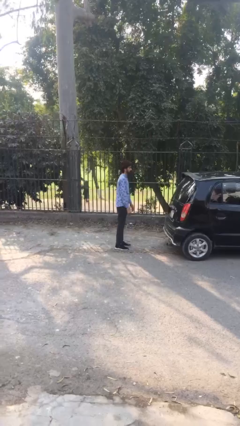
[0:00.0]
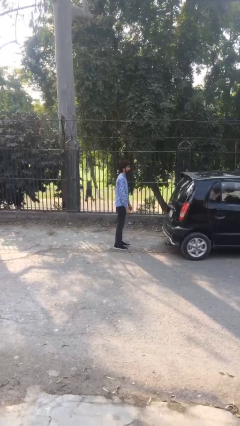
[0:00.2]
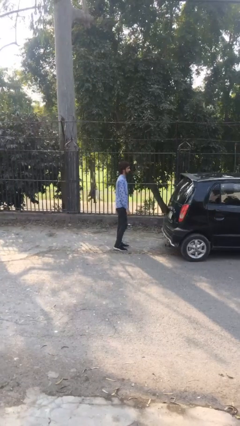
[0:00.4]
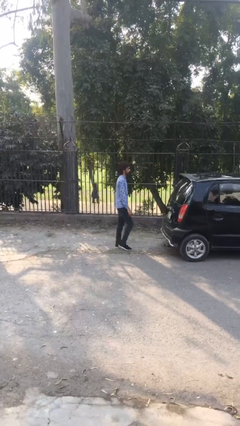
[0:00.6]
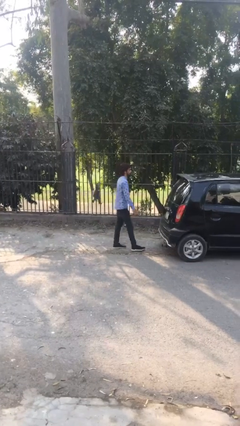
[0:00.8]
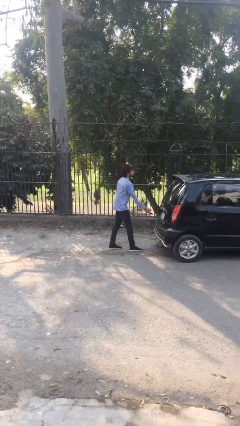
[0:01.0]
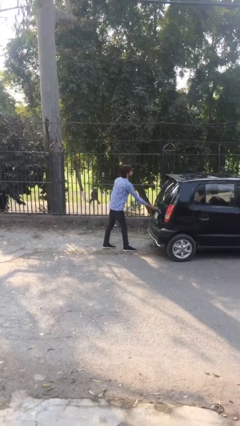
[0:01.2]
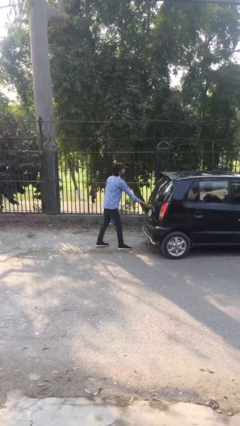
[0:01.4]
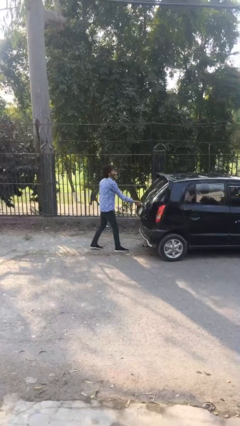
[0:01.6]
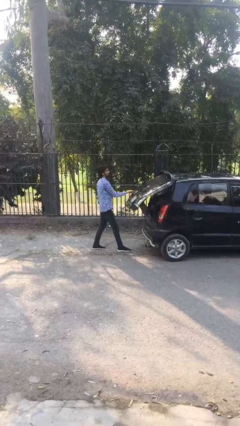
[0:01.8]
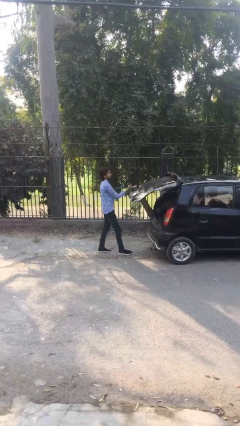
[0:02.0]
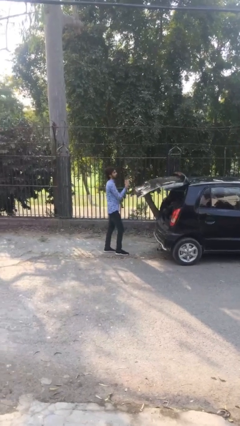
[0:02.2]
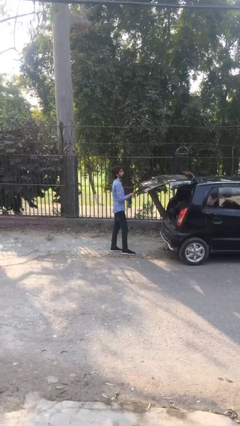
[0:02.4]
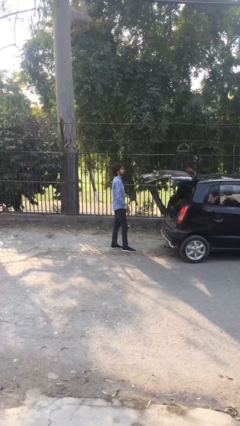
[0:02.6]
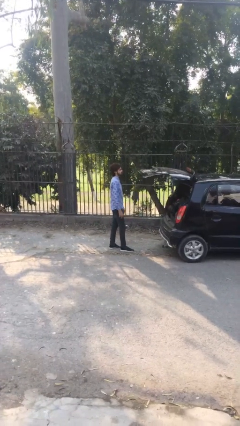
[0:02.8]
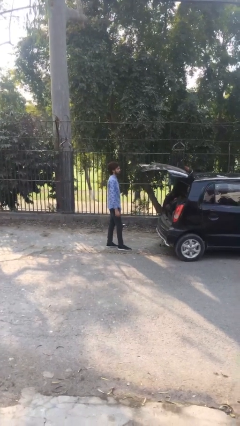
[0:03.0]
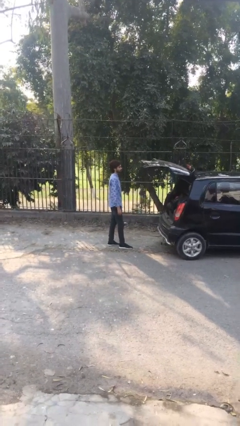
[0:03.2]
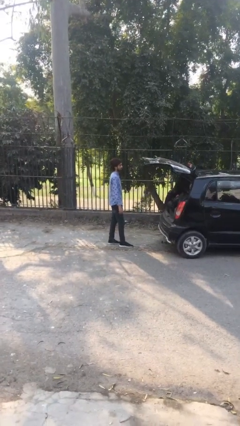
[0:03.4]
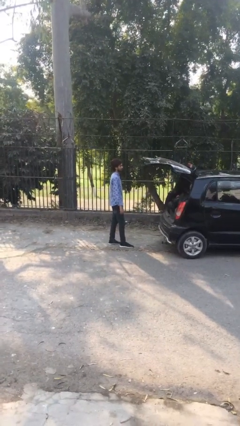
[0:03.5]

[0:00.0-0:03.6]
person opens car trunk

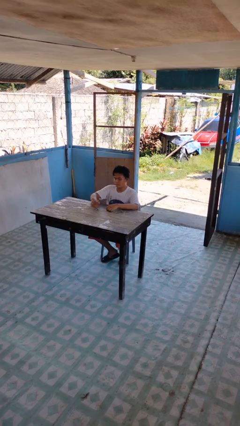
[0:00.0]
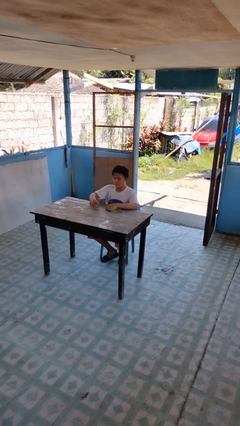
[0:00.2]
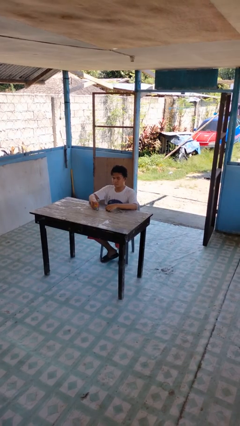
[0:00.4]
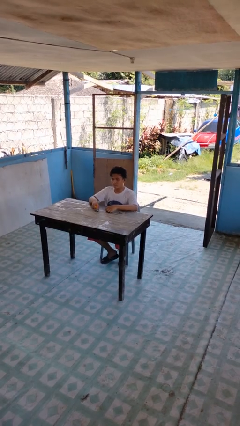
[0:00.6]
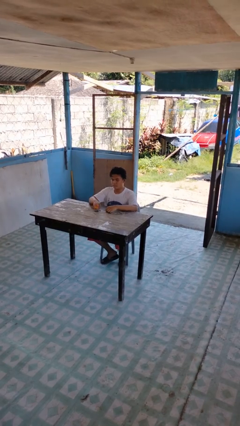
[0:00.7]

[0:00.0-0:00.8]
person sets upright glass

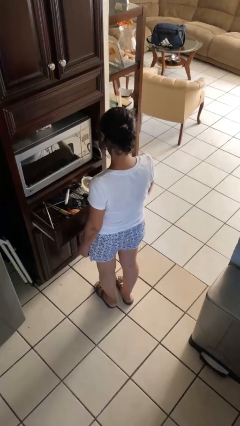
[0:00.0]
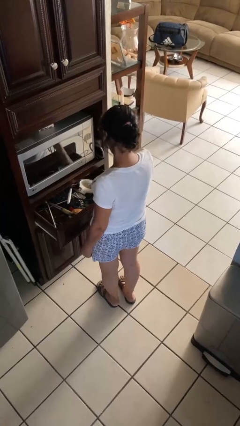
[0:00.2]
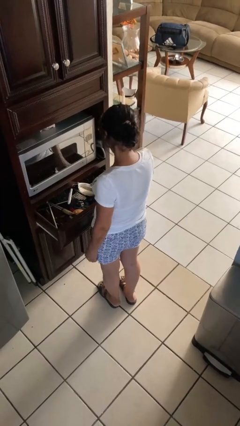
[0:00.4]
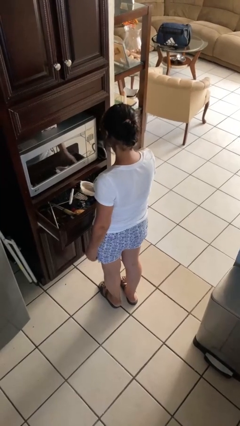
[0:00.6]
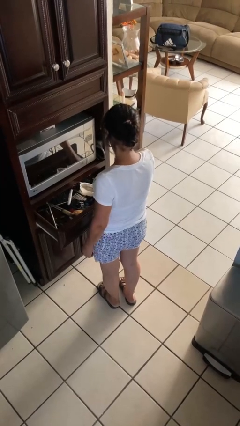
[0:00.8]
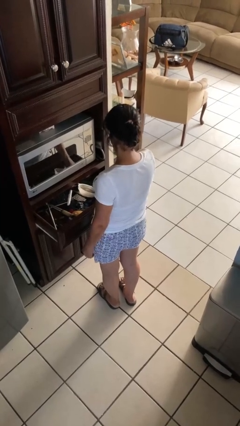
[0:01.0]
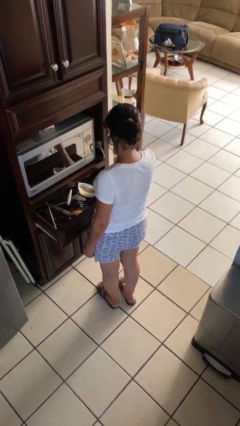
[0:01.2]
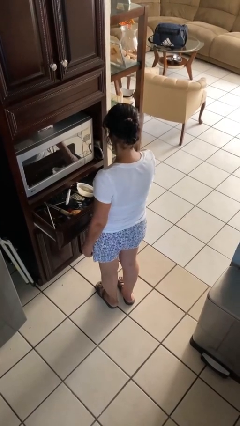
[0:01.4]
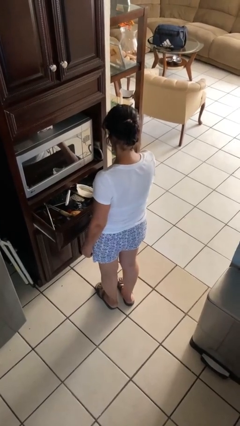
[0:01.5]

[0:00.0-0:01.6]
person searches in kitchen drawer

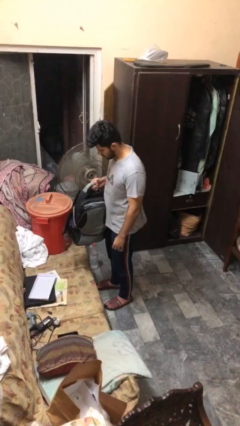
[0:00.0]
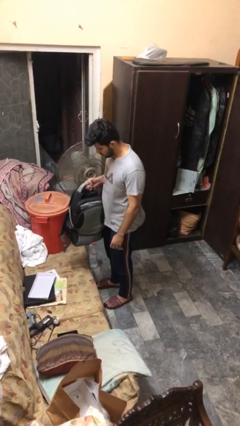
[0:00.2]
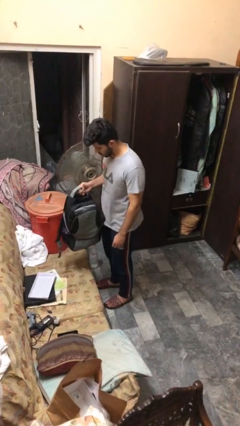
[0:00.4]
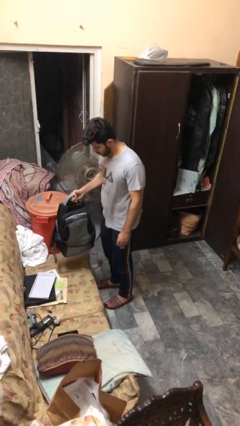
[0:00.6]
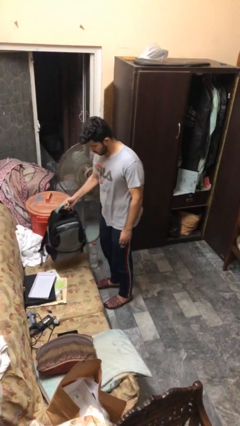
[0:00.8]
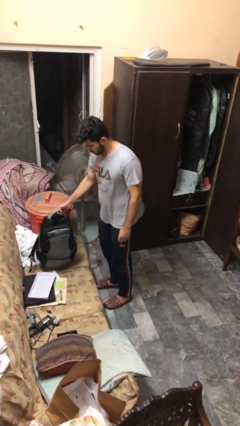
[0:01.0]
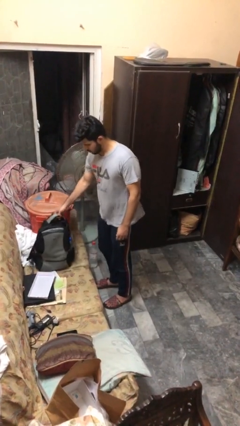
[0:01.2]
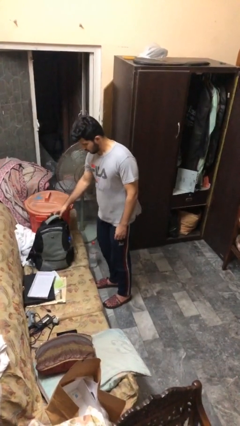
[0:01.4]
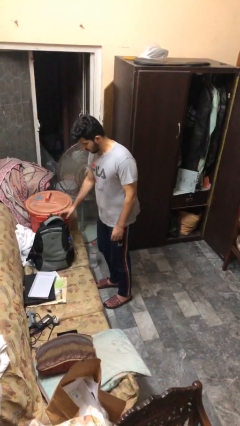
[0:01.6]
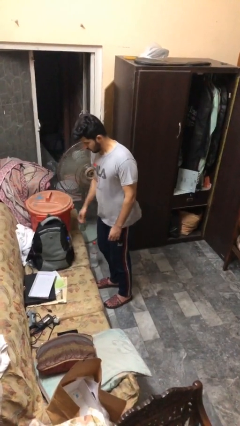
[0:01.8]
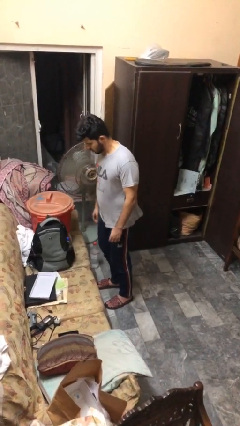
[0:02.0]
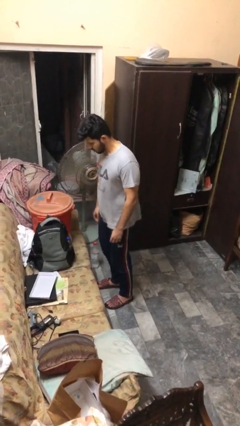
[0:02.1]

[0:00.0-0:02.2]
person puts down object on couch

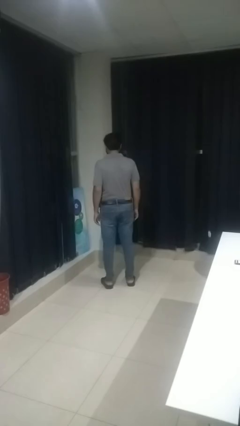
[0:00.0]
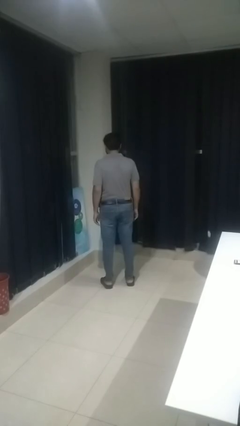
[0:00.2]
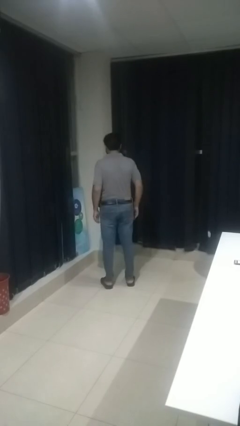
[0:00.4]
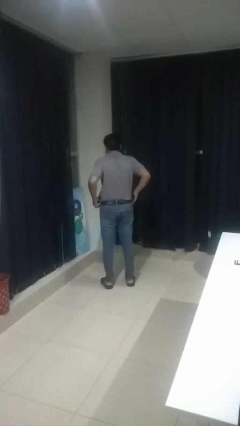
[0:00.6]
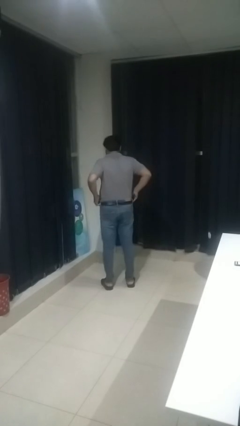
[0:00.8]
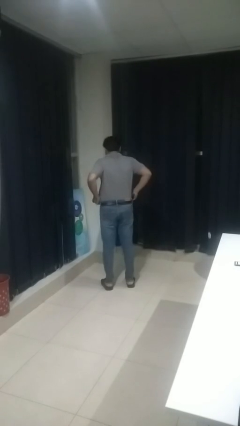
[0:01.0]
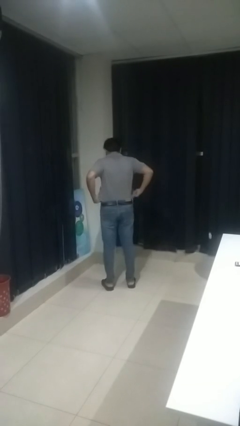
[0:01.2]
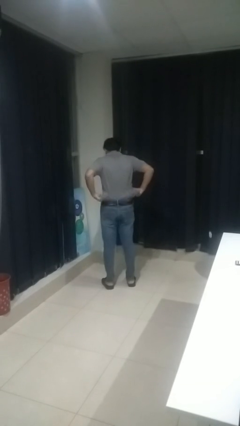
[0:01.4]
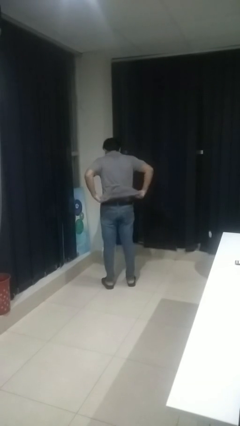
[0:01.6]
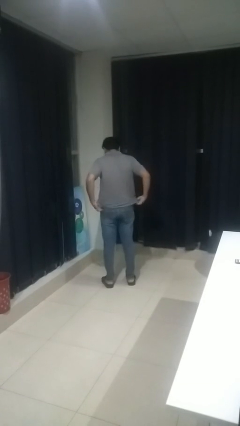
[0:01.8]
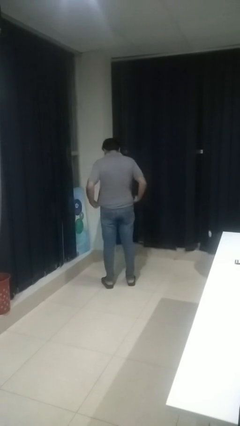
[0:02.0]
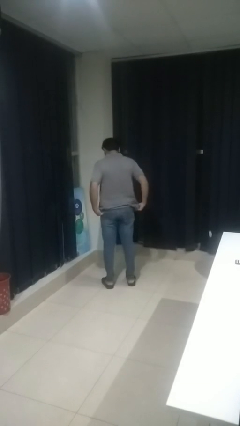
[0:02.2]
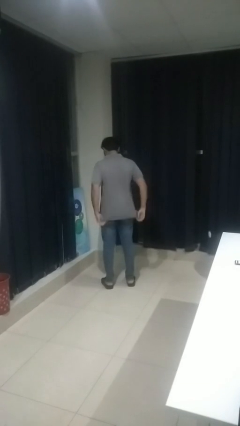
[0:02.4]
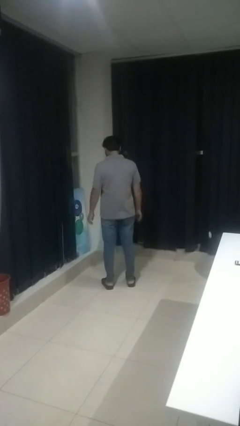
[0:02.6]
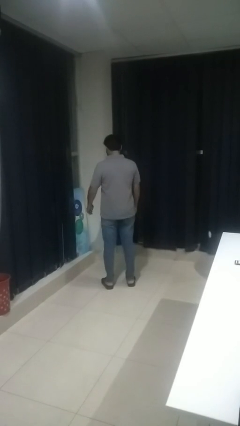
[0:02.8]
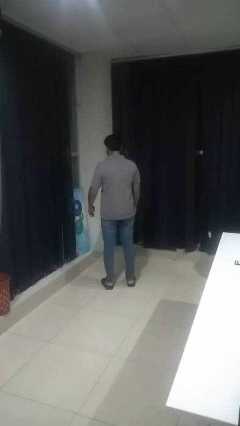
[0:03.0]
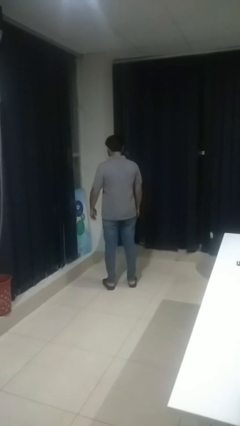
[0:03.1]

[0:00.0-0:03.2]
person untucks shirt

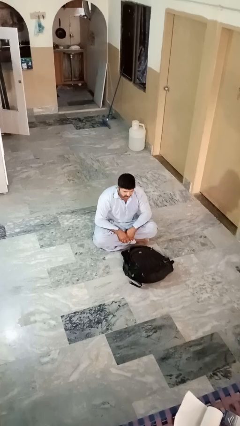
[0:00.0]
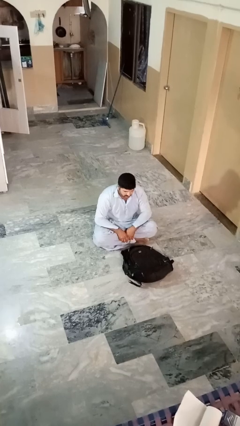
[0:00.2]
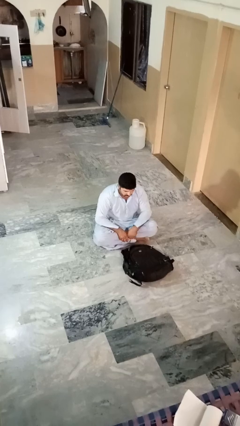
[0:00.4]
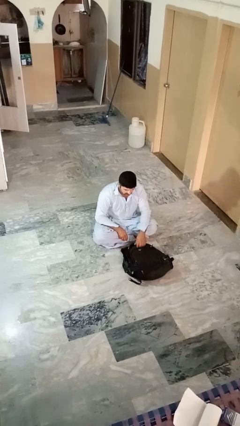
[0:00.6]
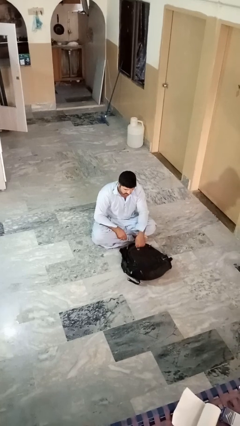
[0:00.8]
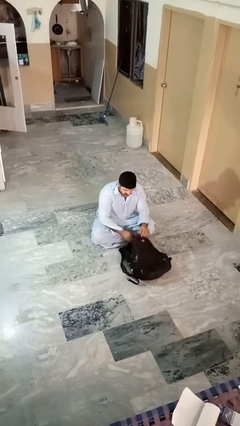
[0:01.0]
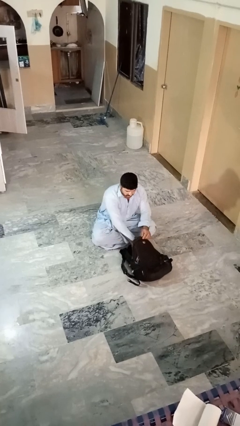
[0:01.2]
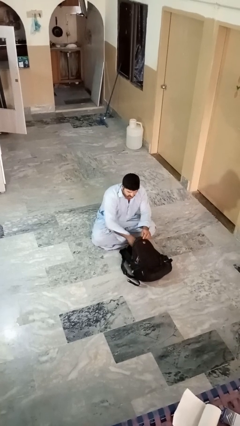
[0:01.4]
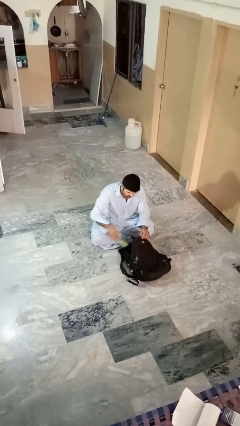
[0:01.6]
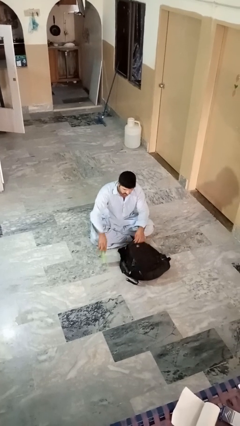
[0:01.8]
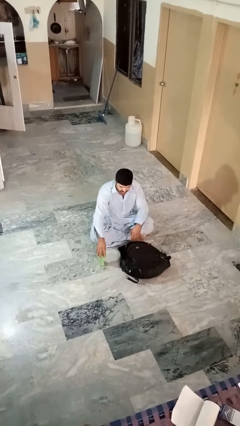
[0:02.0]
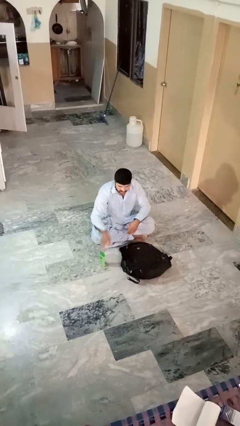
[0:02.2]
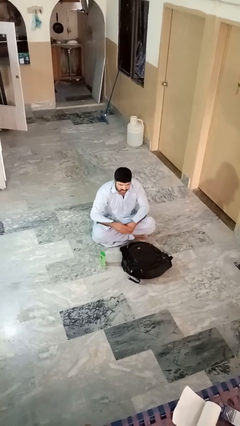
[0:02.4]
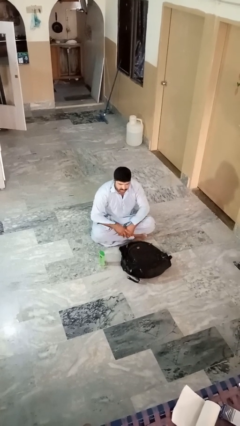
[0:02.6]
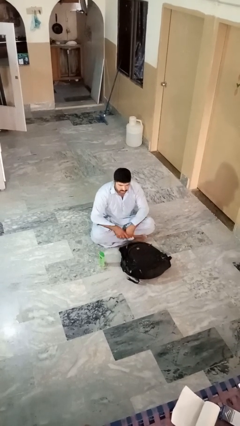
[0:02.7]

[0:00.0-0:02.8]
person takes object from bag

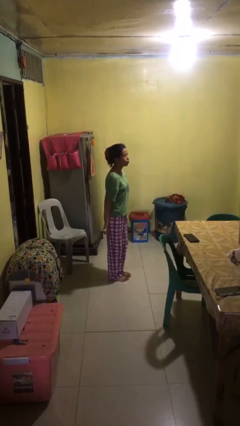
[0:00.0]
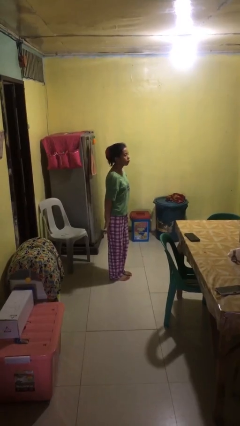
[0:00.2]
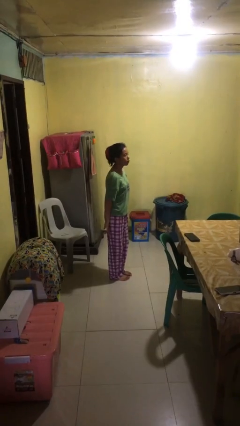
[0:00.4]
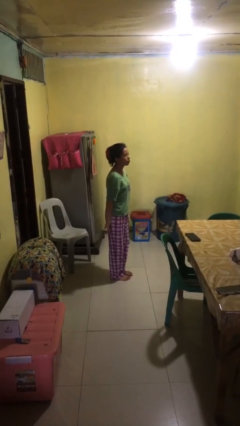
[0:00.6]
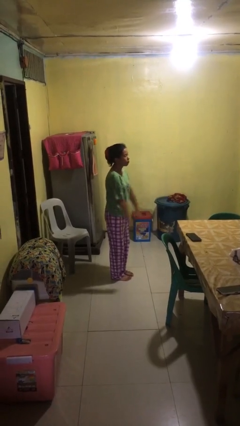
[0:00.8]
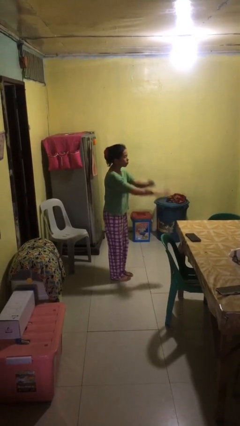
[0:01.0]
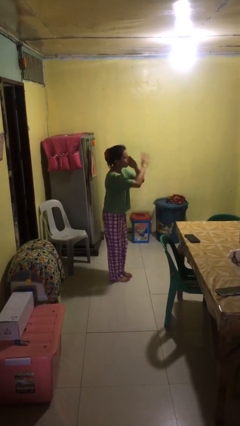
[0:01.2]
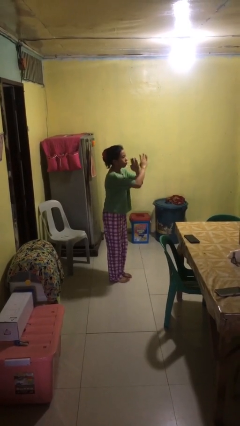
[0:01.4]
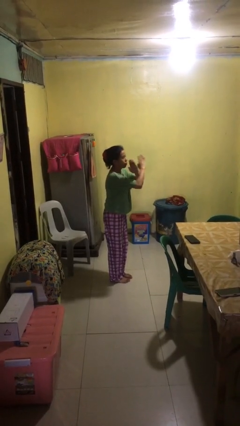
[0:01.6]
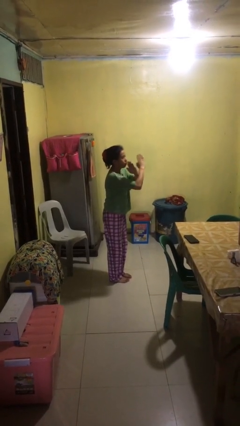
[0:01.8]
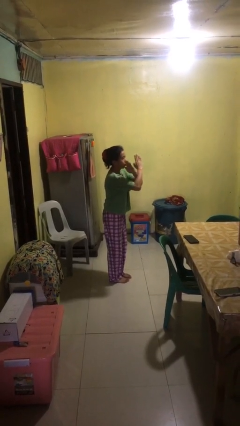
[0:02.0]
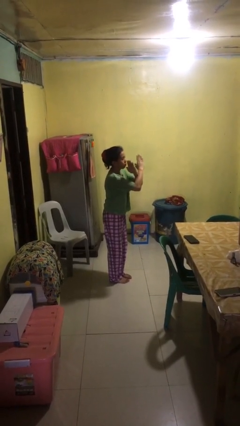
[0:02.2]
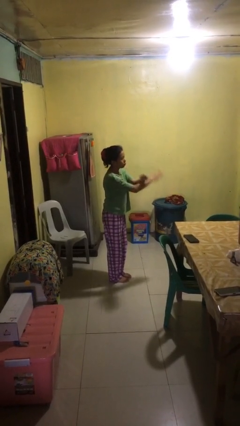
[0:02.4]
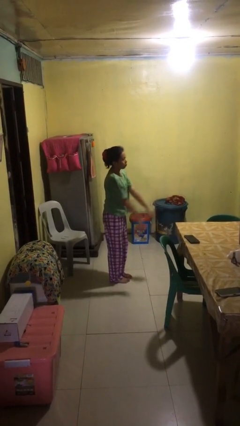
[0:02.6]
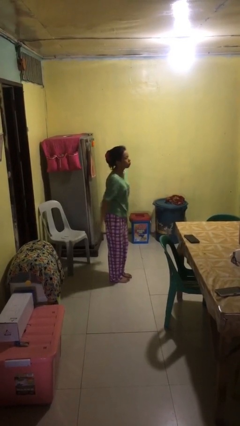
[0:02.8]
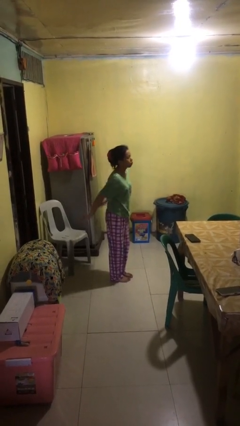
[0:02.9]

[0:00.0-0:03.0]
person gestures arms x
